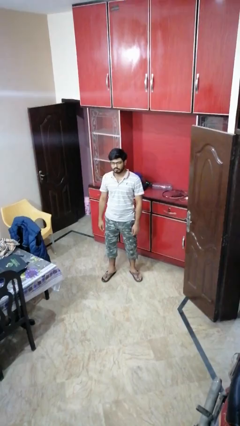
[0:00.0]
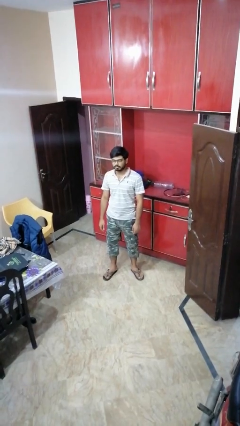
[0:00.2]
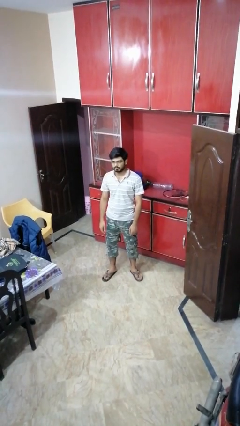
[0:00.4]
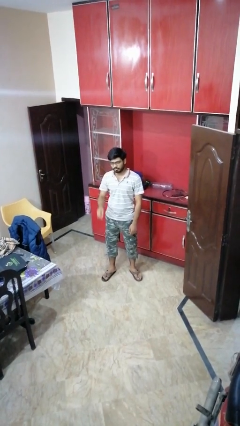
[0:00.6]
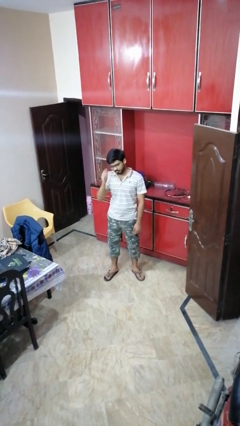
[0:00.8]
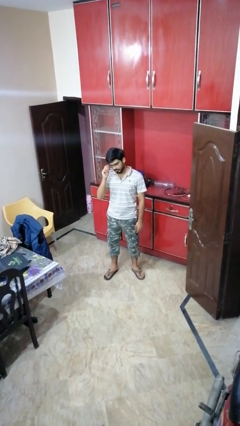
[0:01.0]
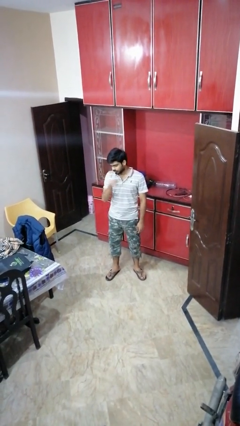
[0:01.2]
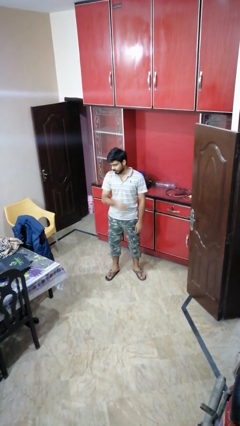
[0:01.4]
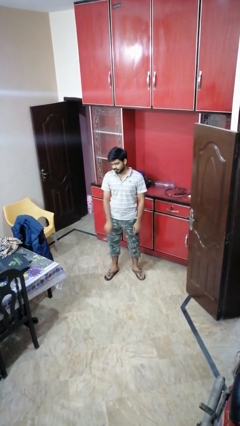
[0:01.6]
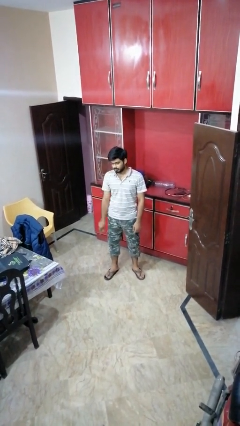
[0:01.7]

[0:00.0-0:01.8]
person takes off glasses

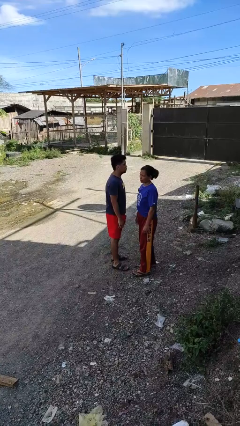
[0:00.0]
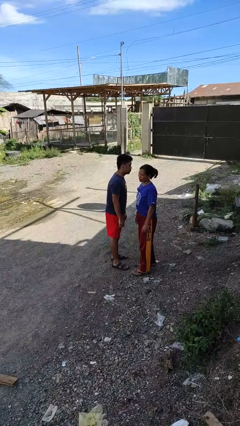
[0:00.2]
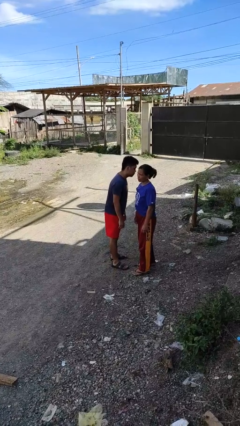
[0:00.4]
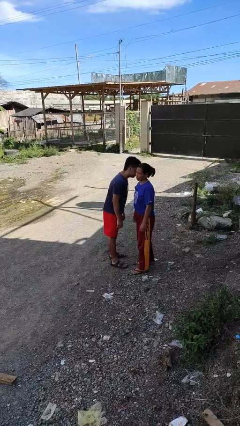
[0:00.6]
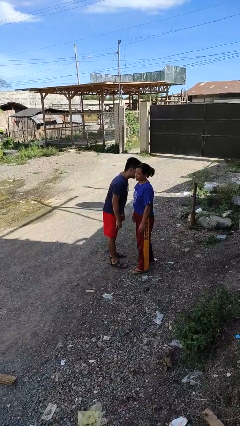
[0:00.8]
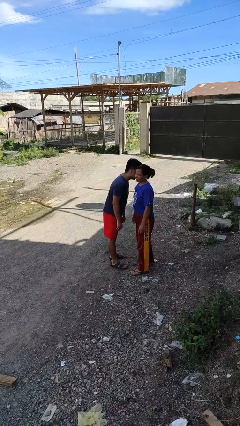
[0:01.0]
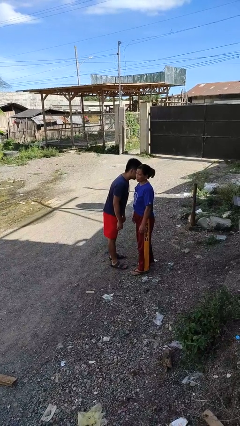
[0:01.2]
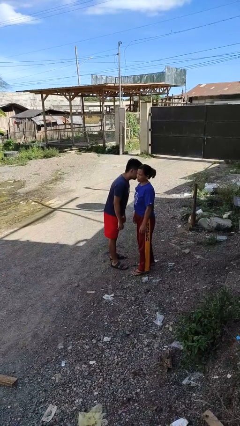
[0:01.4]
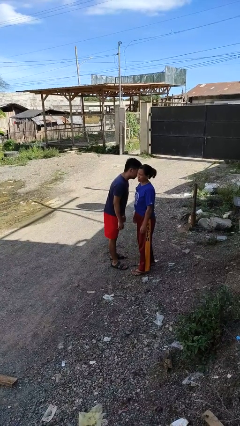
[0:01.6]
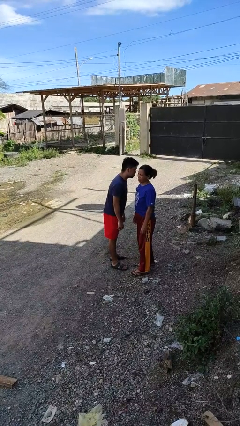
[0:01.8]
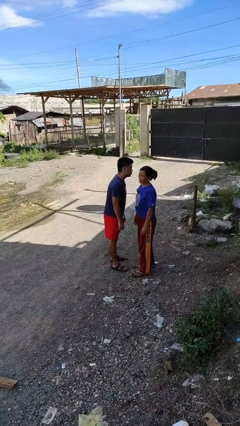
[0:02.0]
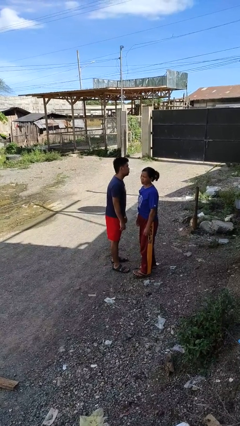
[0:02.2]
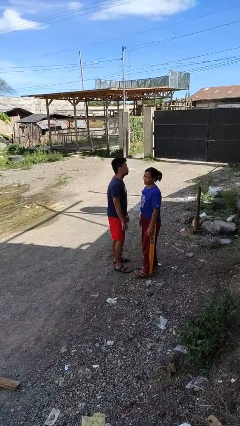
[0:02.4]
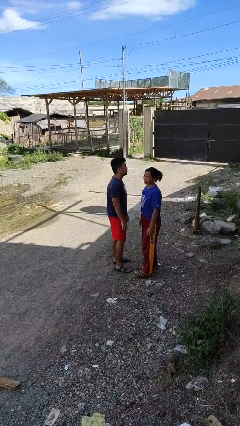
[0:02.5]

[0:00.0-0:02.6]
person kisses cheek of person

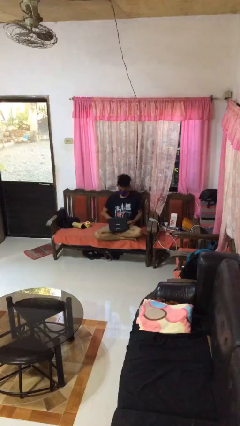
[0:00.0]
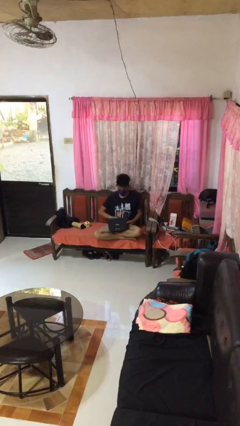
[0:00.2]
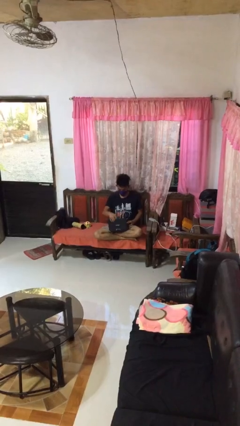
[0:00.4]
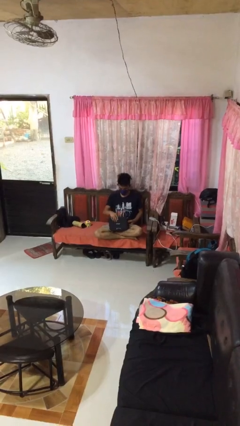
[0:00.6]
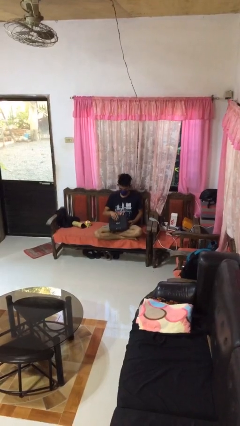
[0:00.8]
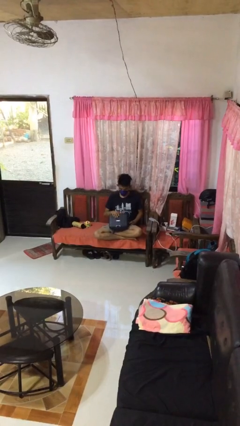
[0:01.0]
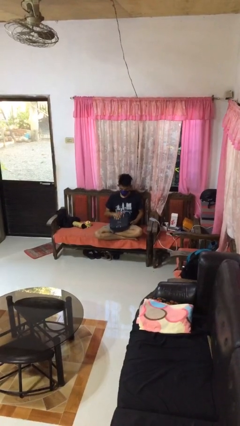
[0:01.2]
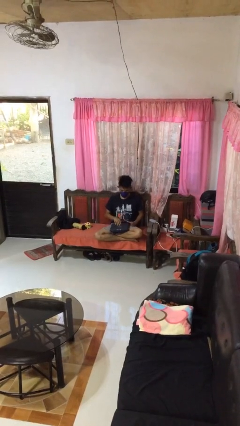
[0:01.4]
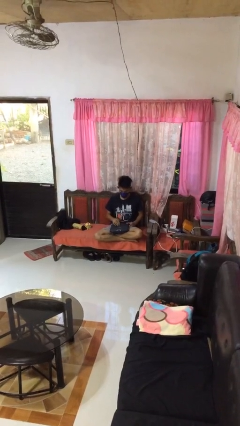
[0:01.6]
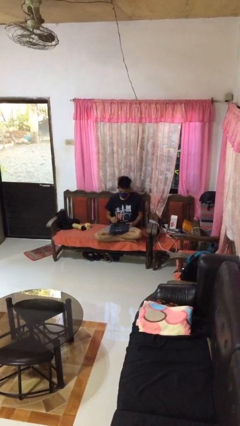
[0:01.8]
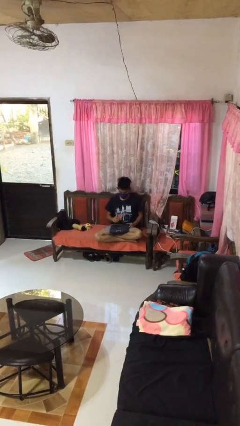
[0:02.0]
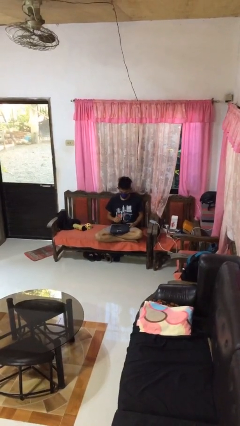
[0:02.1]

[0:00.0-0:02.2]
person closes laptop

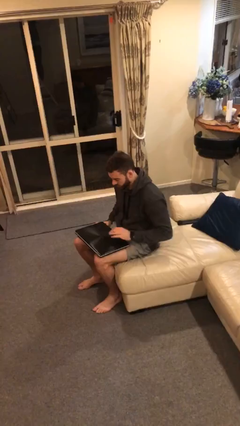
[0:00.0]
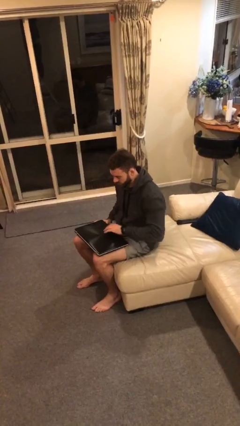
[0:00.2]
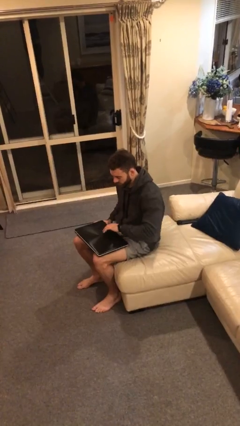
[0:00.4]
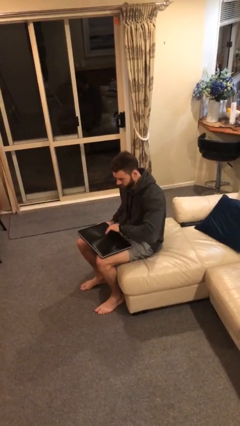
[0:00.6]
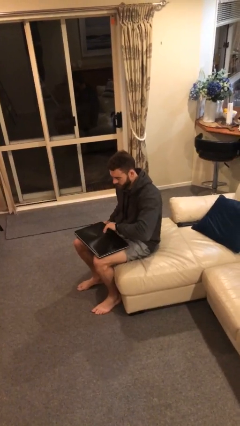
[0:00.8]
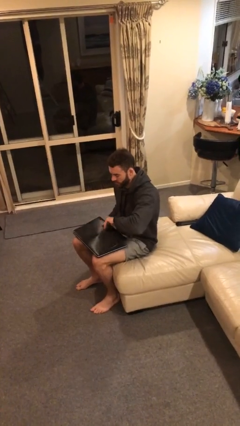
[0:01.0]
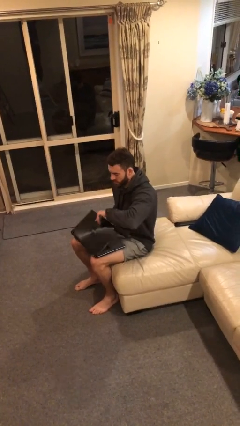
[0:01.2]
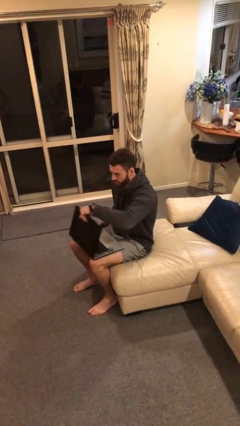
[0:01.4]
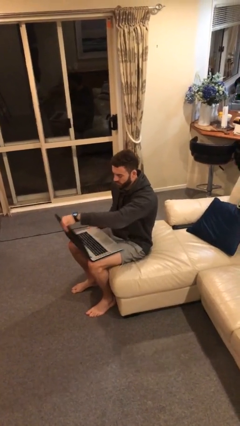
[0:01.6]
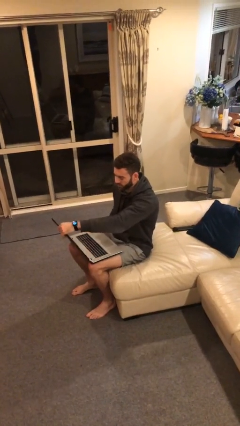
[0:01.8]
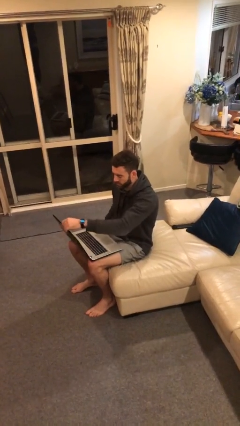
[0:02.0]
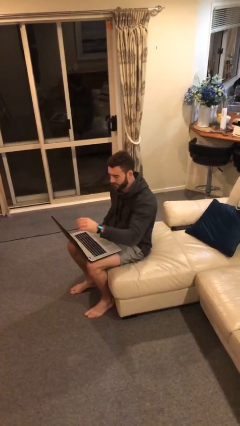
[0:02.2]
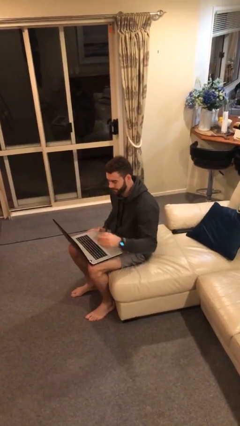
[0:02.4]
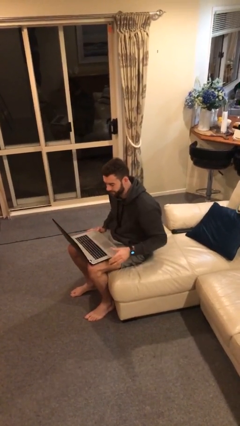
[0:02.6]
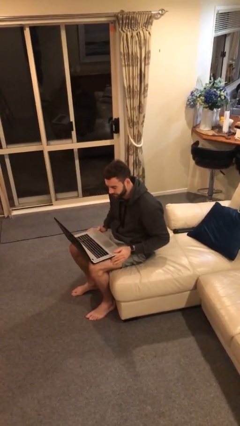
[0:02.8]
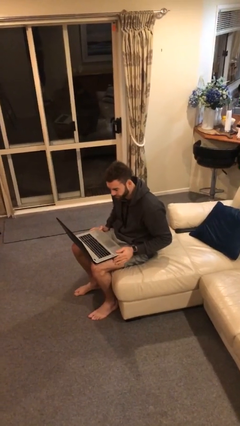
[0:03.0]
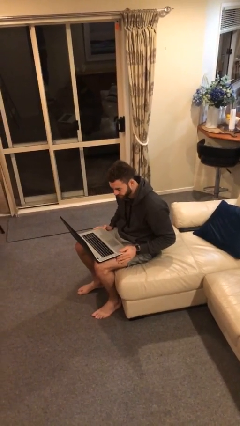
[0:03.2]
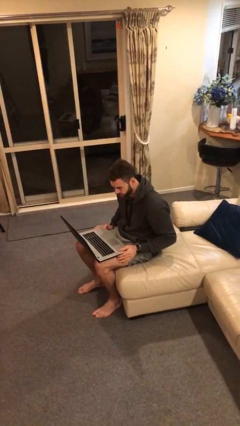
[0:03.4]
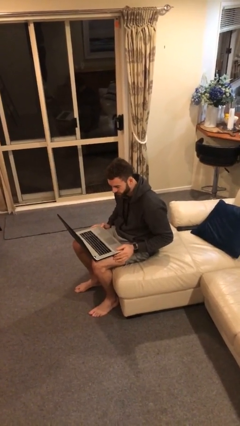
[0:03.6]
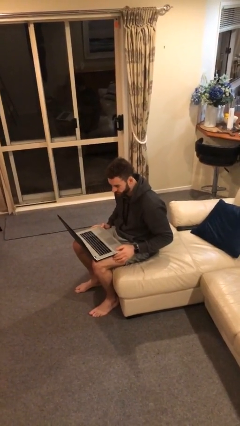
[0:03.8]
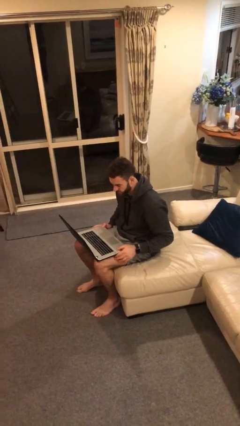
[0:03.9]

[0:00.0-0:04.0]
person opens laptop

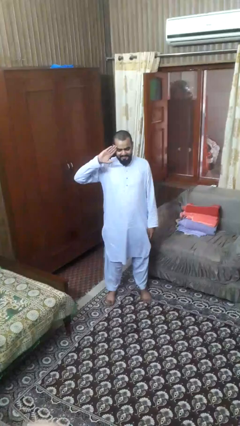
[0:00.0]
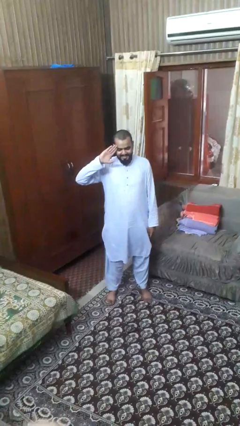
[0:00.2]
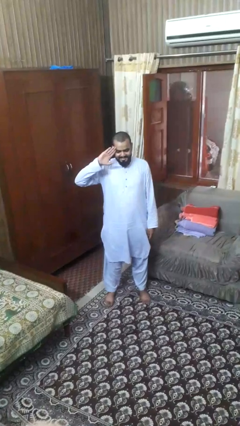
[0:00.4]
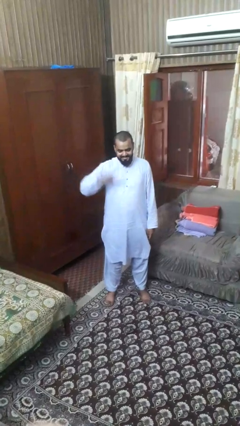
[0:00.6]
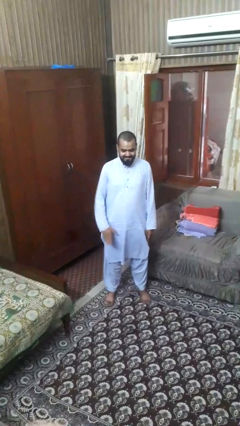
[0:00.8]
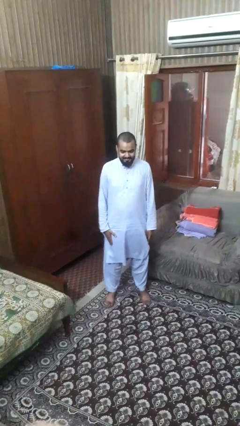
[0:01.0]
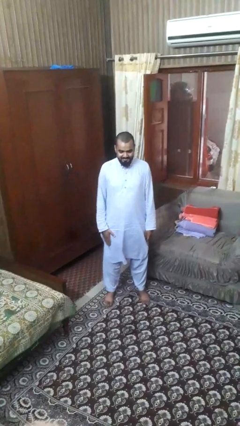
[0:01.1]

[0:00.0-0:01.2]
person salutes

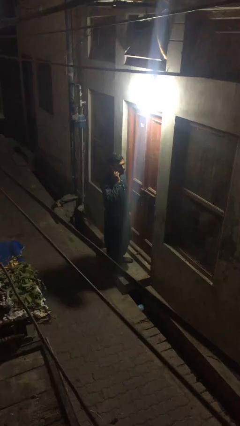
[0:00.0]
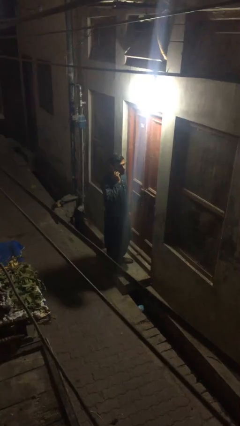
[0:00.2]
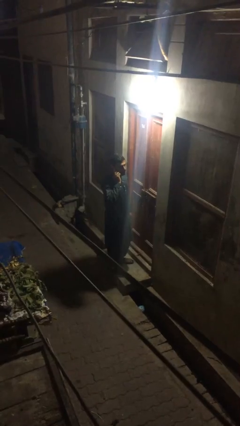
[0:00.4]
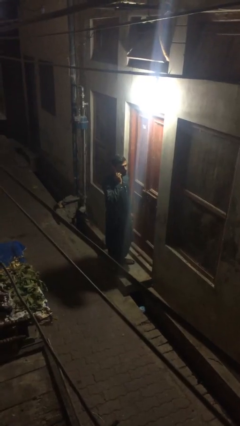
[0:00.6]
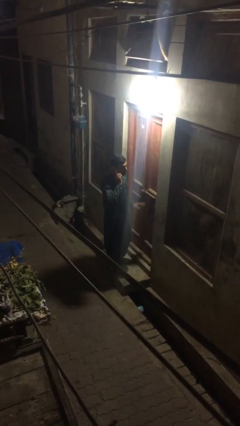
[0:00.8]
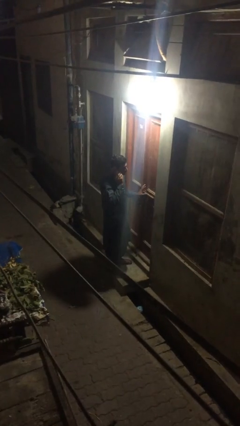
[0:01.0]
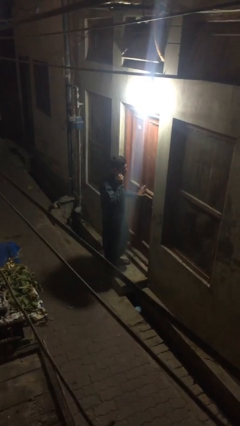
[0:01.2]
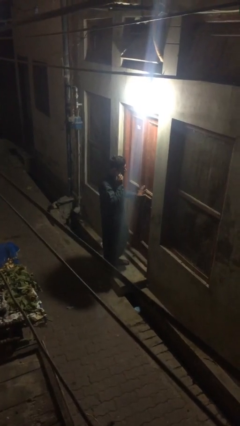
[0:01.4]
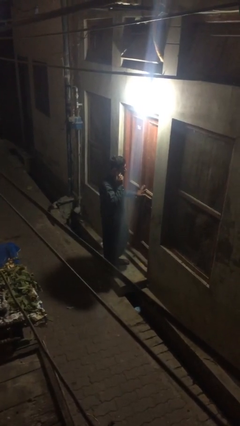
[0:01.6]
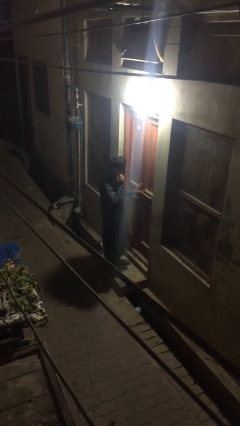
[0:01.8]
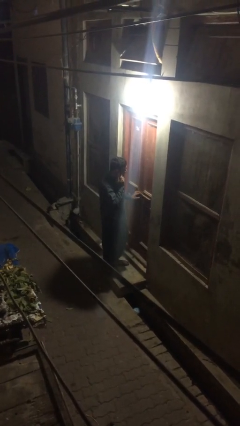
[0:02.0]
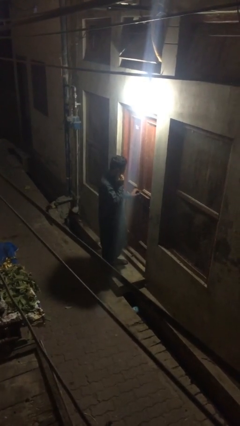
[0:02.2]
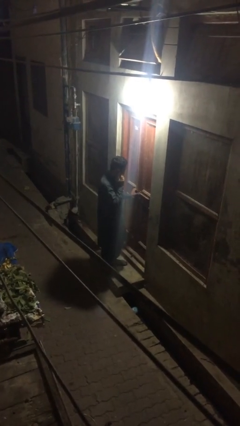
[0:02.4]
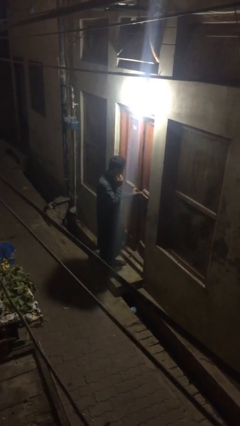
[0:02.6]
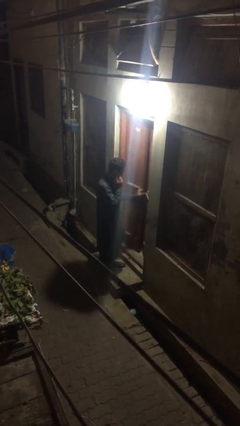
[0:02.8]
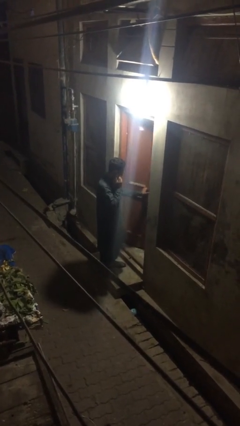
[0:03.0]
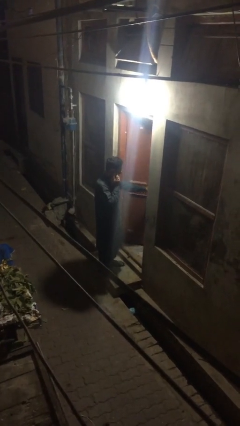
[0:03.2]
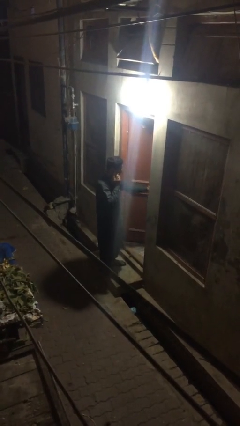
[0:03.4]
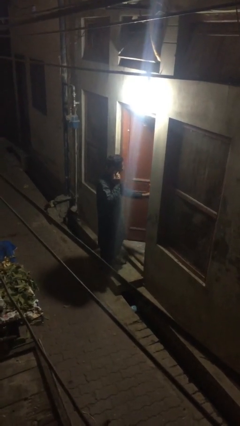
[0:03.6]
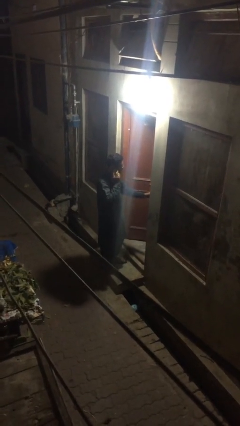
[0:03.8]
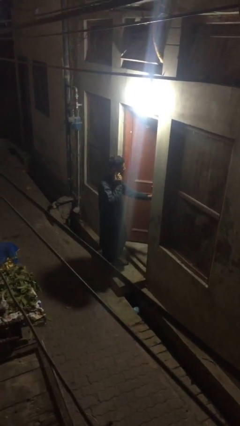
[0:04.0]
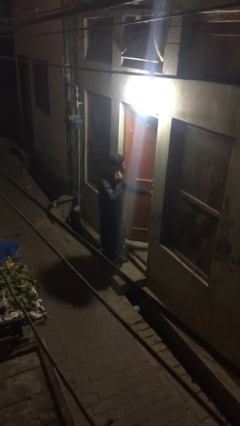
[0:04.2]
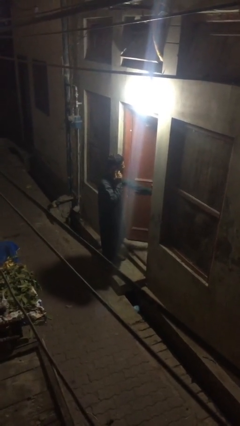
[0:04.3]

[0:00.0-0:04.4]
person opens facility door

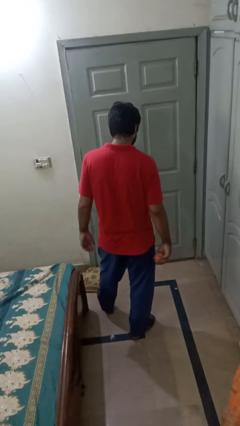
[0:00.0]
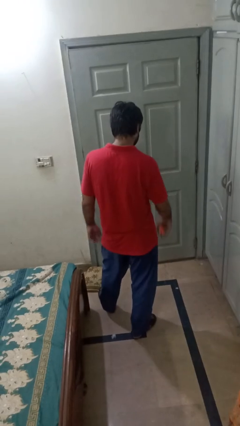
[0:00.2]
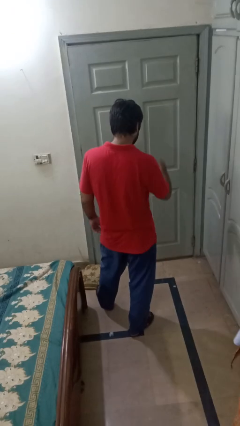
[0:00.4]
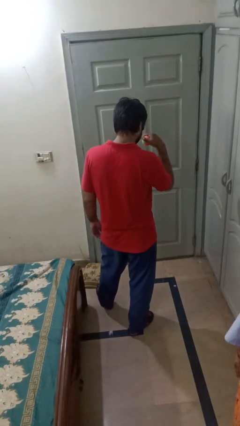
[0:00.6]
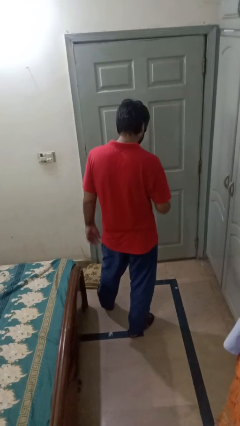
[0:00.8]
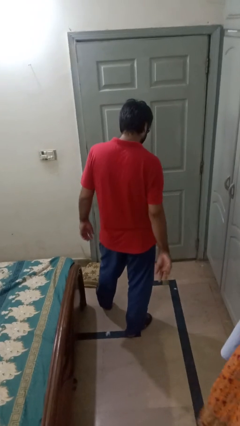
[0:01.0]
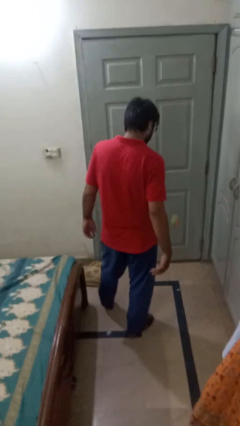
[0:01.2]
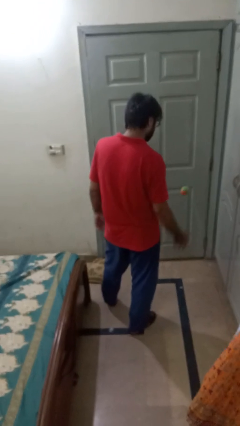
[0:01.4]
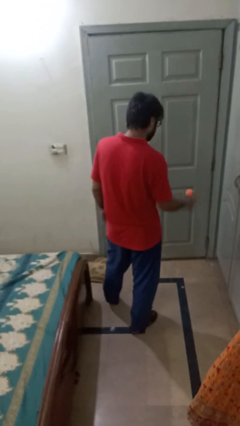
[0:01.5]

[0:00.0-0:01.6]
person bounces ball on floor
